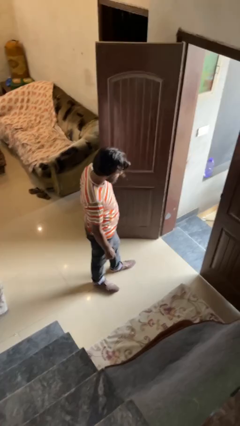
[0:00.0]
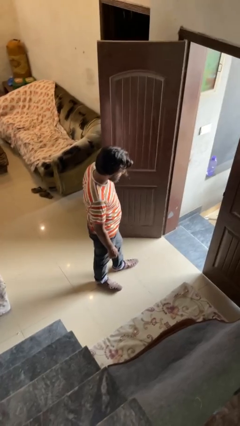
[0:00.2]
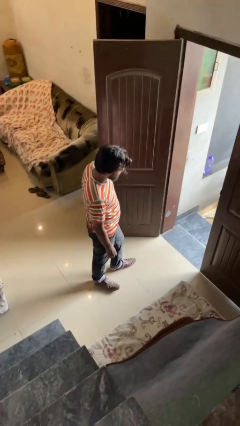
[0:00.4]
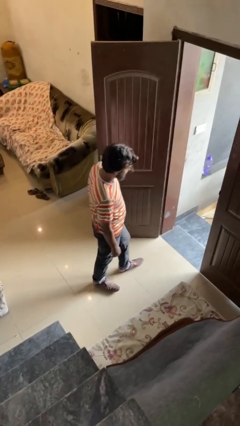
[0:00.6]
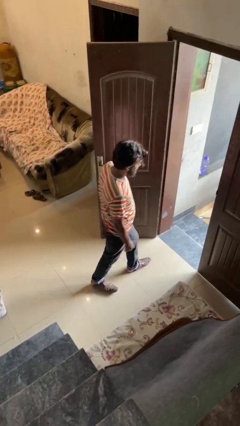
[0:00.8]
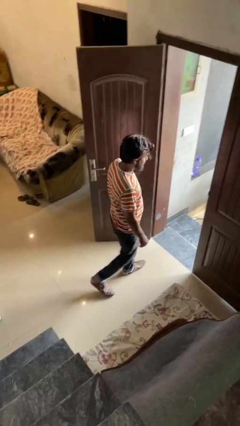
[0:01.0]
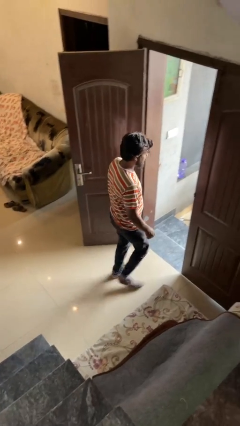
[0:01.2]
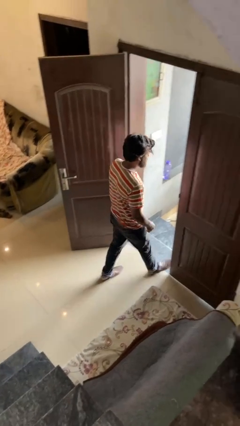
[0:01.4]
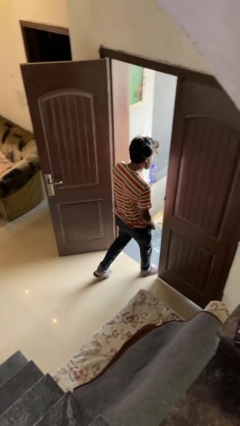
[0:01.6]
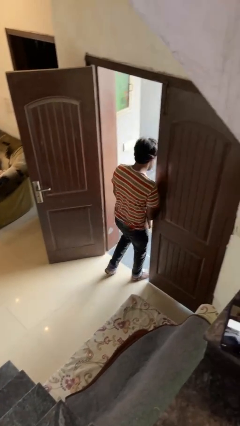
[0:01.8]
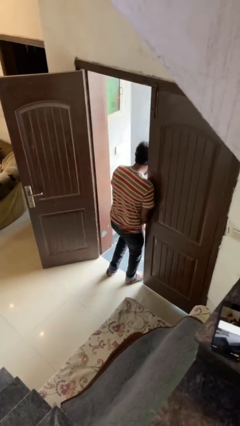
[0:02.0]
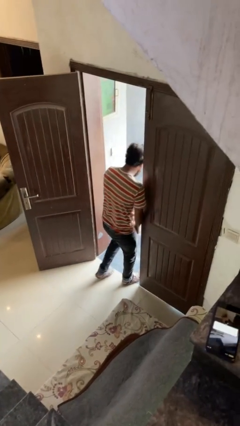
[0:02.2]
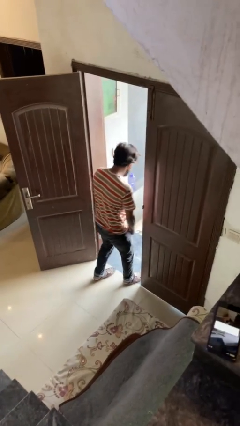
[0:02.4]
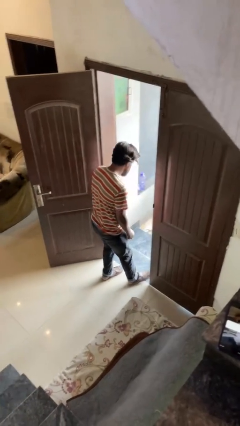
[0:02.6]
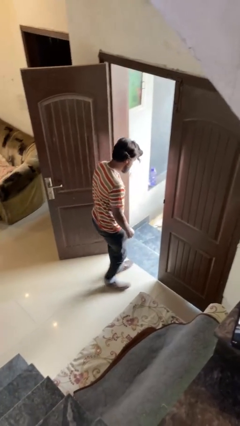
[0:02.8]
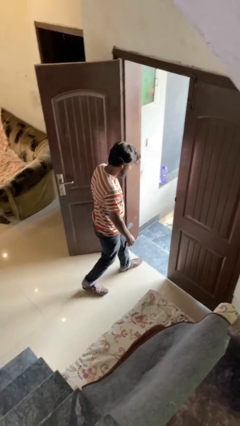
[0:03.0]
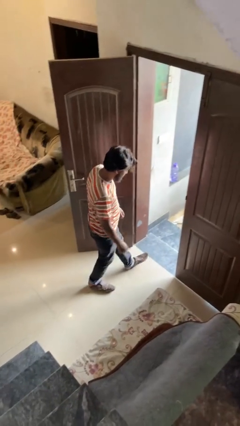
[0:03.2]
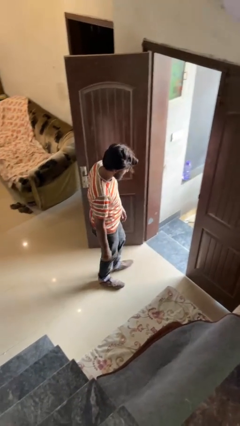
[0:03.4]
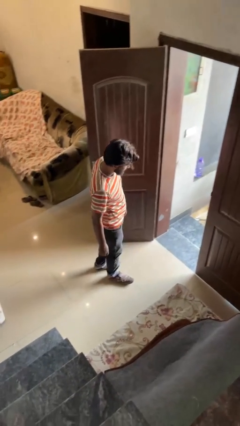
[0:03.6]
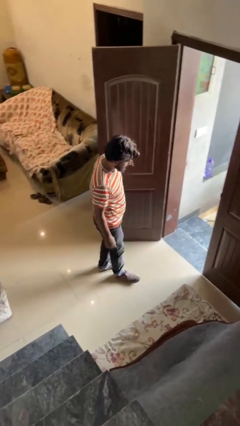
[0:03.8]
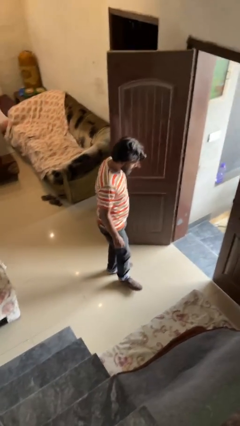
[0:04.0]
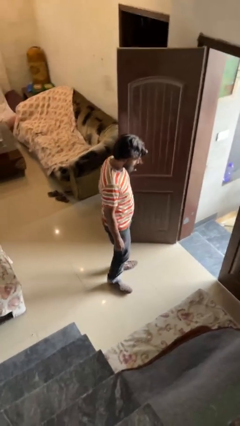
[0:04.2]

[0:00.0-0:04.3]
person bumps into wall

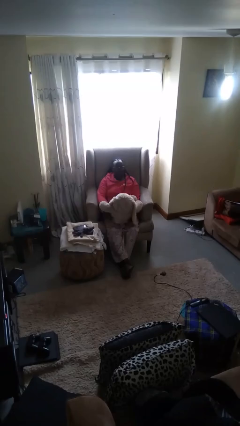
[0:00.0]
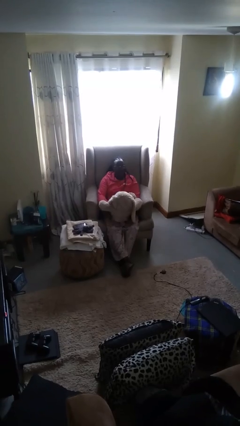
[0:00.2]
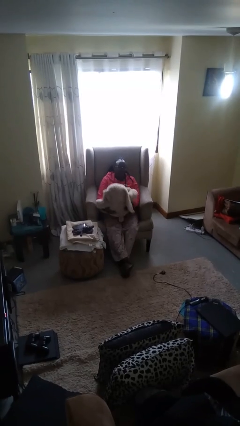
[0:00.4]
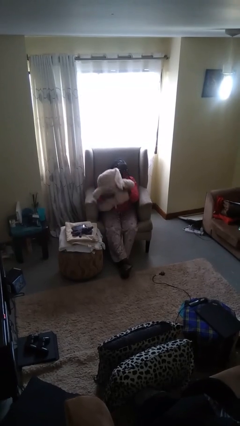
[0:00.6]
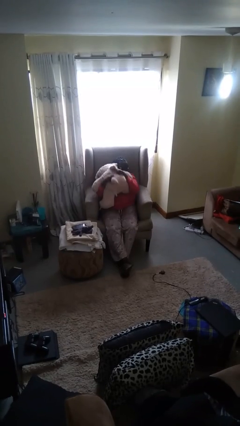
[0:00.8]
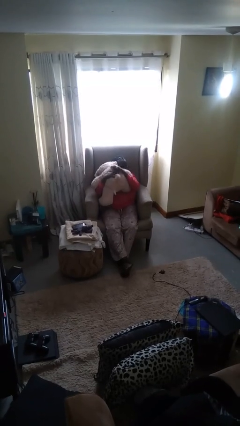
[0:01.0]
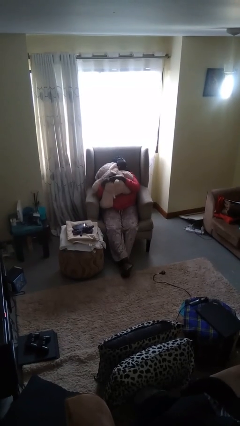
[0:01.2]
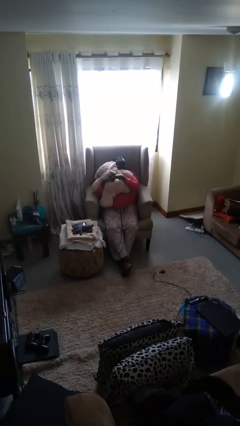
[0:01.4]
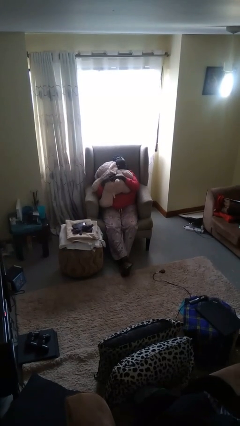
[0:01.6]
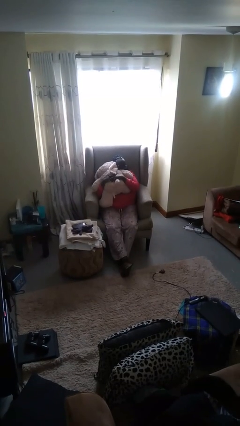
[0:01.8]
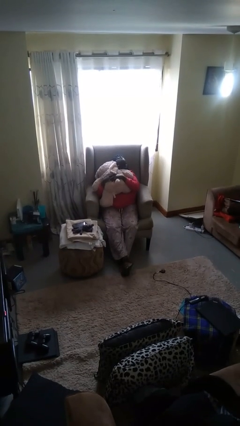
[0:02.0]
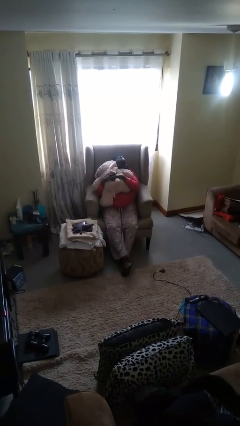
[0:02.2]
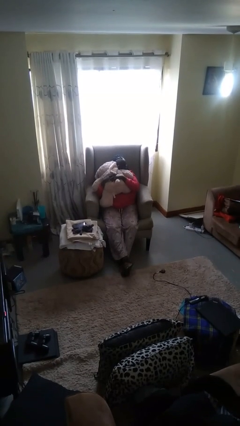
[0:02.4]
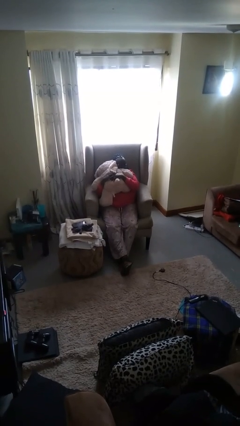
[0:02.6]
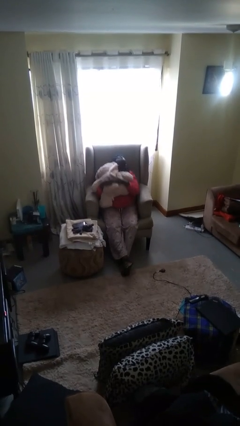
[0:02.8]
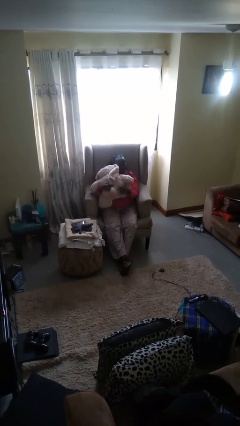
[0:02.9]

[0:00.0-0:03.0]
person hugs stuffed animal

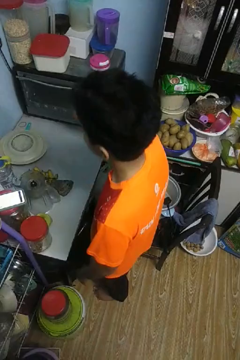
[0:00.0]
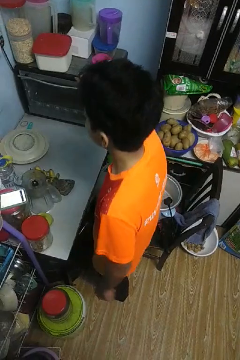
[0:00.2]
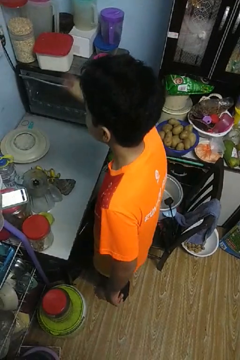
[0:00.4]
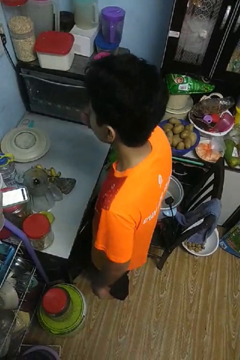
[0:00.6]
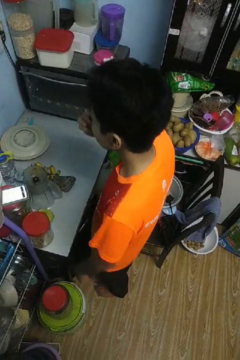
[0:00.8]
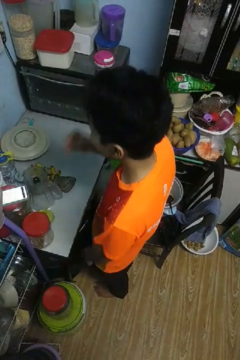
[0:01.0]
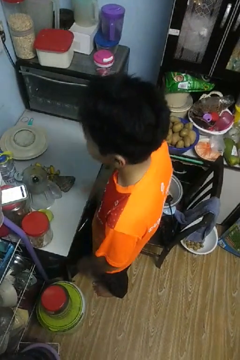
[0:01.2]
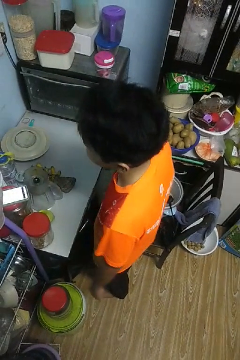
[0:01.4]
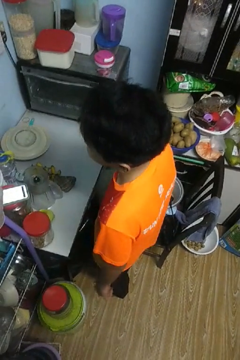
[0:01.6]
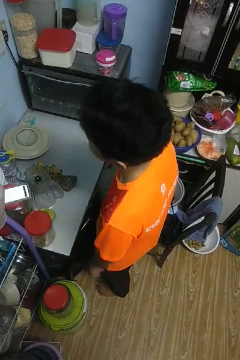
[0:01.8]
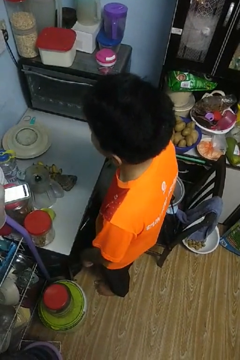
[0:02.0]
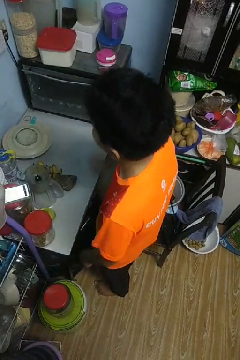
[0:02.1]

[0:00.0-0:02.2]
person burns hand

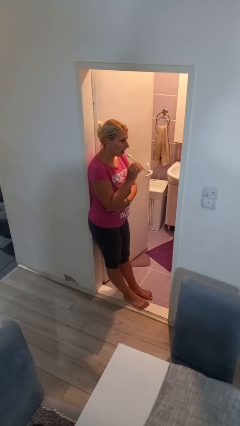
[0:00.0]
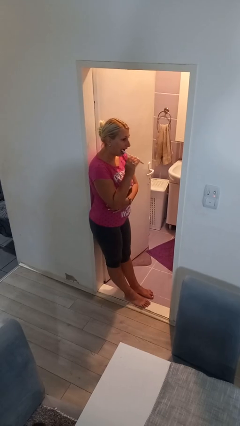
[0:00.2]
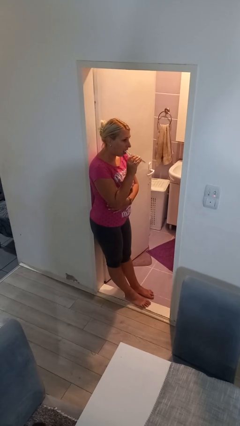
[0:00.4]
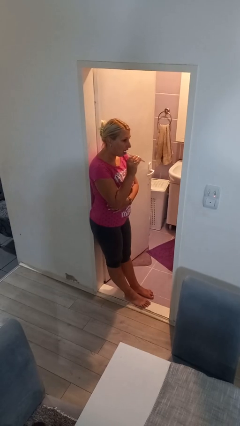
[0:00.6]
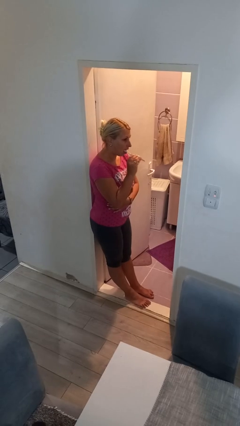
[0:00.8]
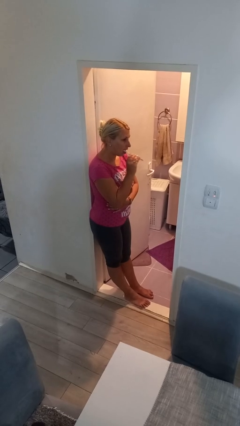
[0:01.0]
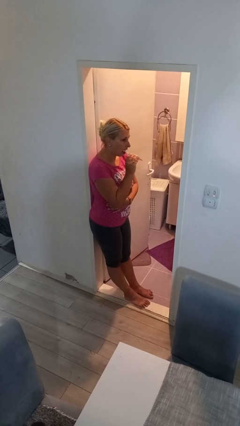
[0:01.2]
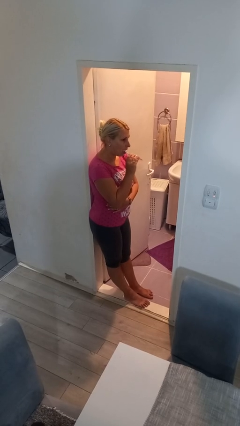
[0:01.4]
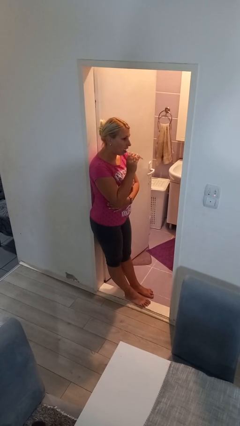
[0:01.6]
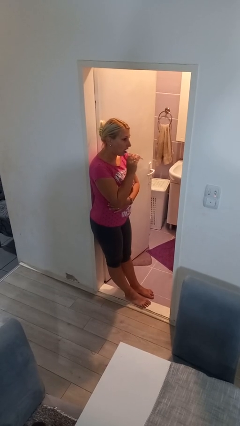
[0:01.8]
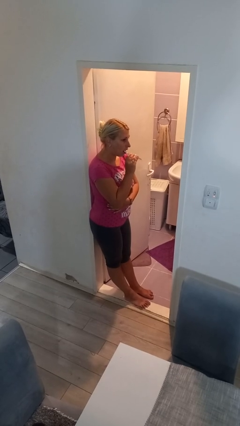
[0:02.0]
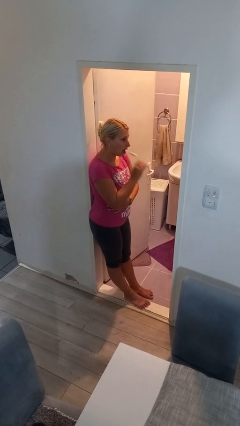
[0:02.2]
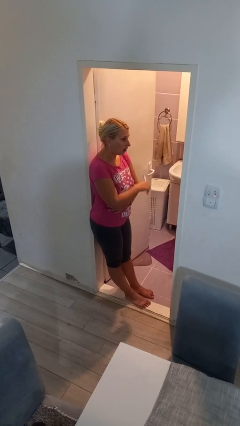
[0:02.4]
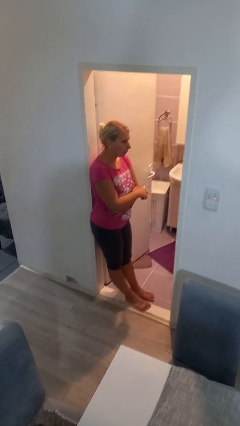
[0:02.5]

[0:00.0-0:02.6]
person brushes teeth

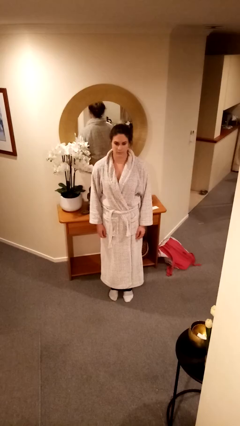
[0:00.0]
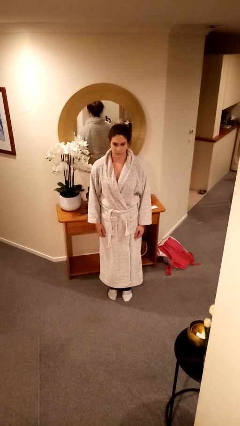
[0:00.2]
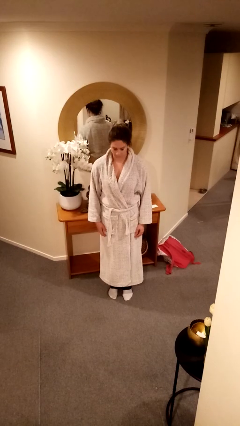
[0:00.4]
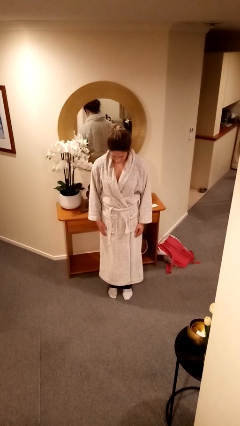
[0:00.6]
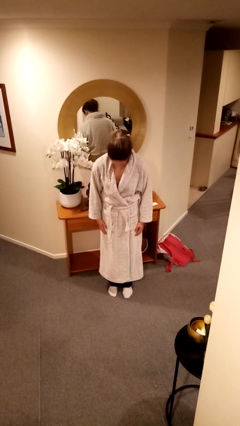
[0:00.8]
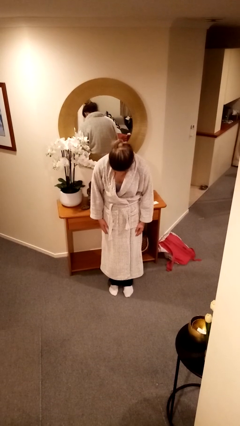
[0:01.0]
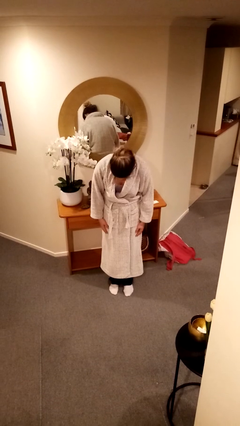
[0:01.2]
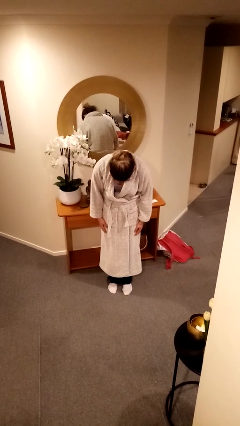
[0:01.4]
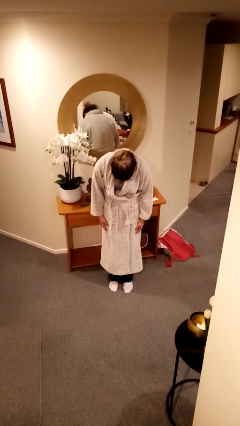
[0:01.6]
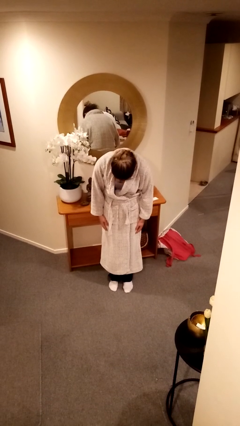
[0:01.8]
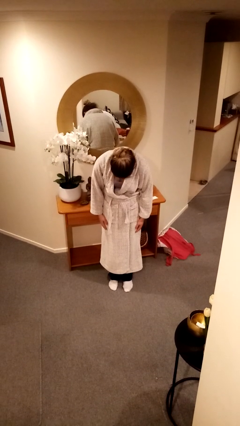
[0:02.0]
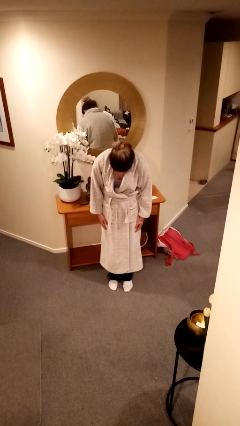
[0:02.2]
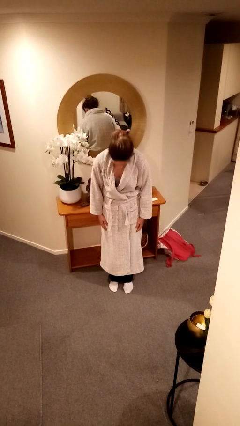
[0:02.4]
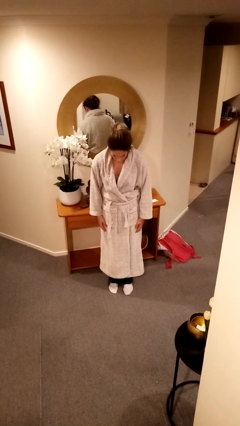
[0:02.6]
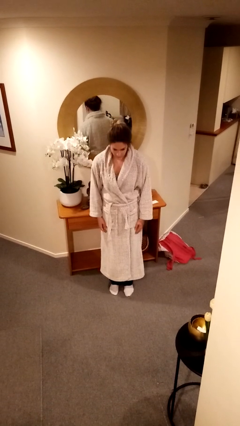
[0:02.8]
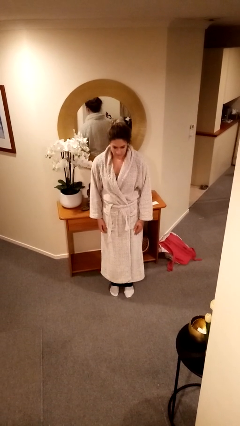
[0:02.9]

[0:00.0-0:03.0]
person bows

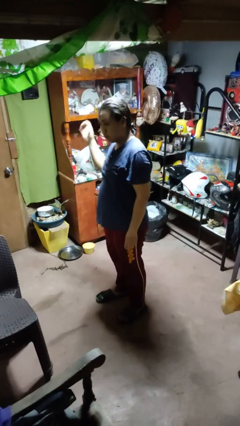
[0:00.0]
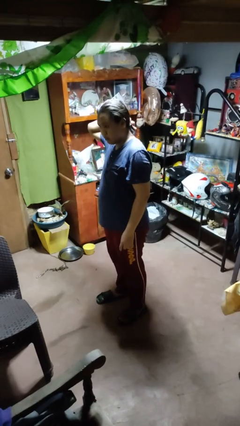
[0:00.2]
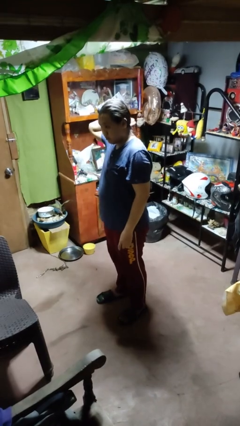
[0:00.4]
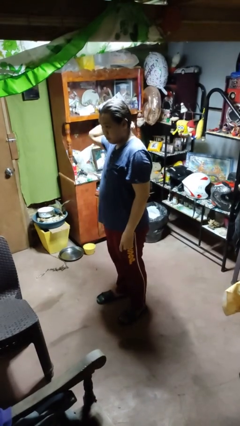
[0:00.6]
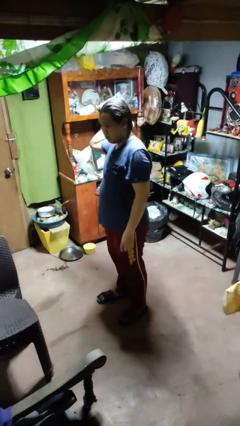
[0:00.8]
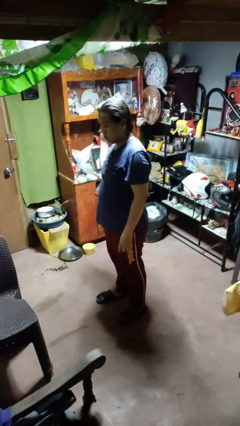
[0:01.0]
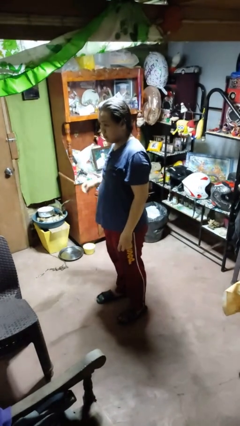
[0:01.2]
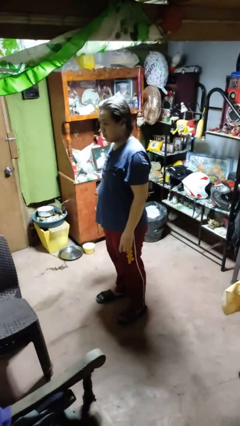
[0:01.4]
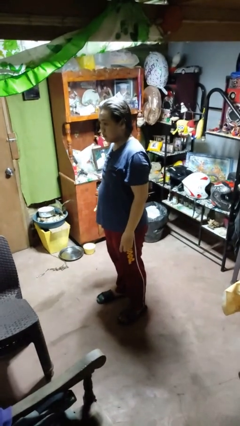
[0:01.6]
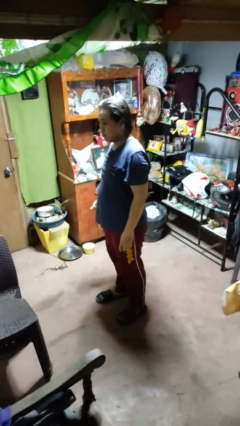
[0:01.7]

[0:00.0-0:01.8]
person takes off hairtie

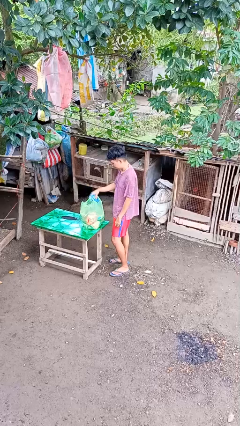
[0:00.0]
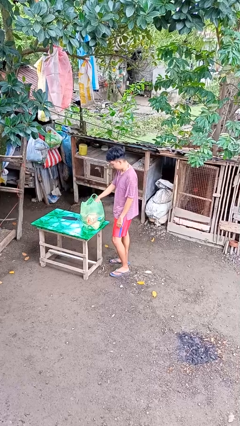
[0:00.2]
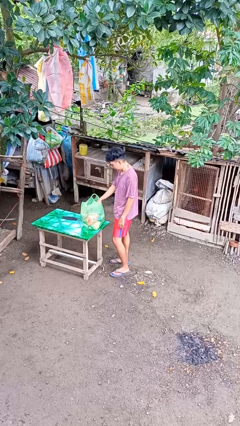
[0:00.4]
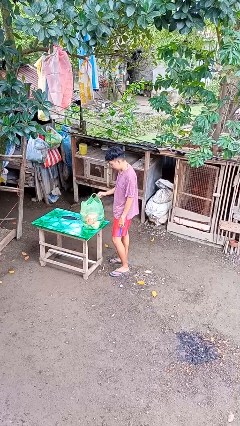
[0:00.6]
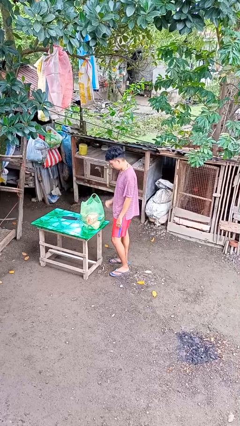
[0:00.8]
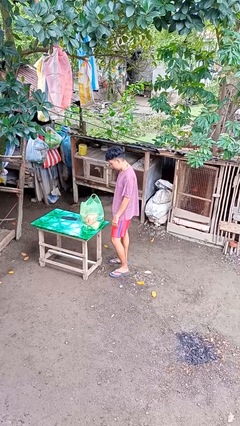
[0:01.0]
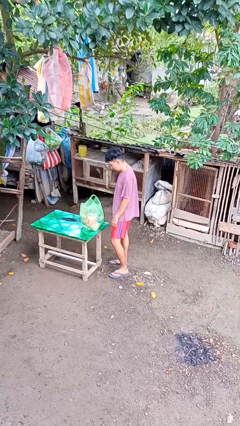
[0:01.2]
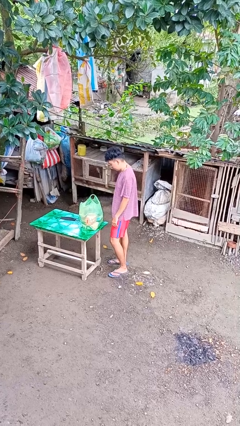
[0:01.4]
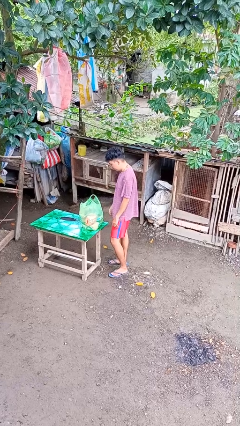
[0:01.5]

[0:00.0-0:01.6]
person puts object into bag
